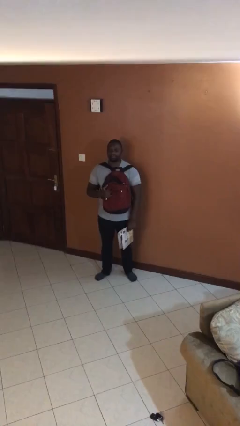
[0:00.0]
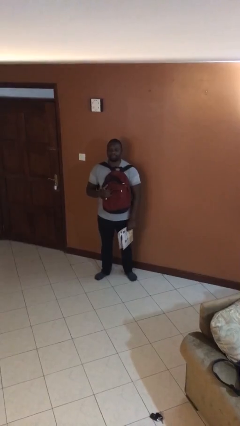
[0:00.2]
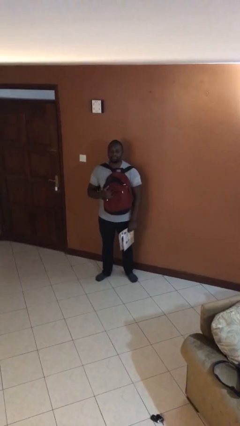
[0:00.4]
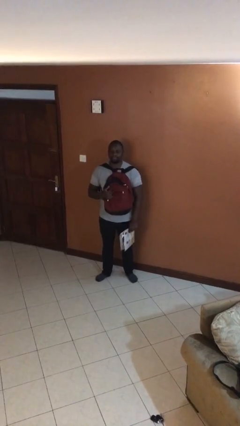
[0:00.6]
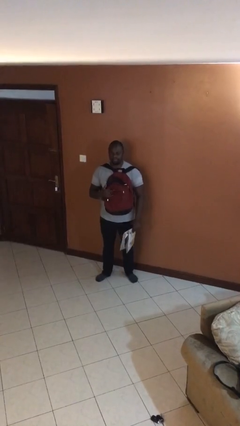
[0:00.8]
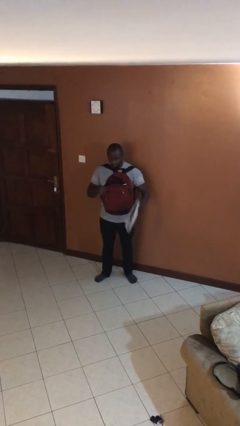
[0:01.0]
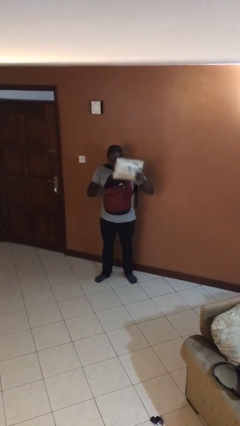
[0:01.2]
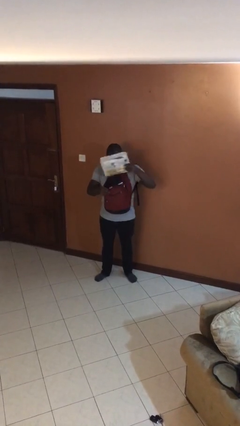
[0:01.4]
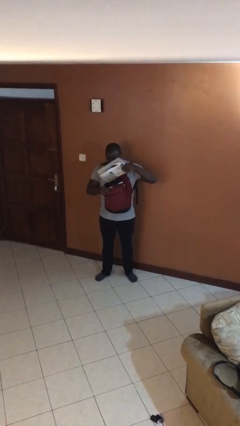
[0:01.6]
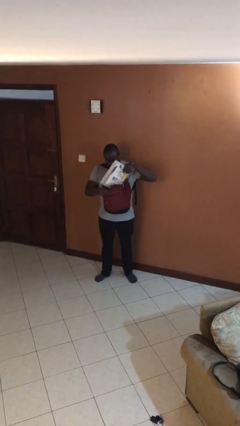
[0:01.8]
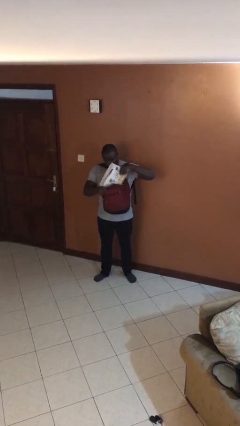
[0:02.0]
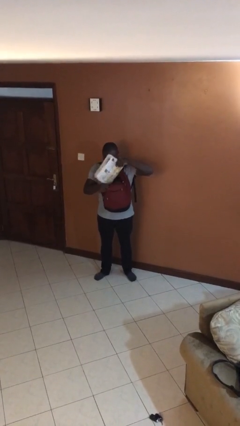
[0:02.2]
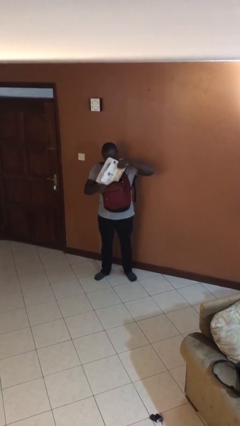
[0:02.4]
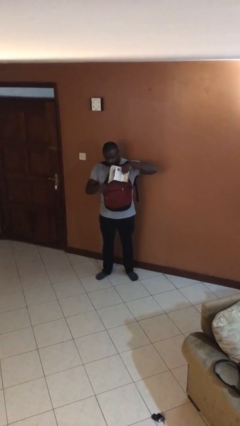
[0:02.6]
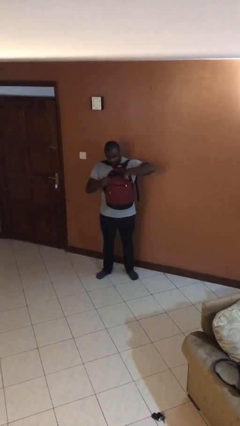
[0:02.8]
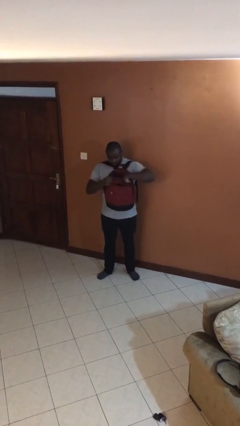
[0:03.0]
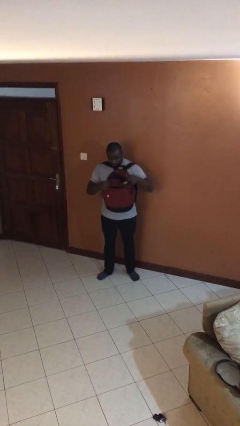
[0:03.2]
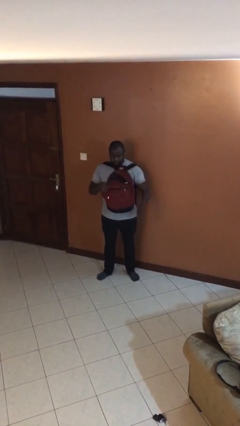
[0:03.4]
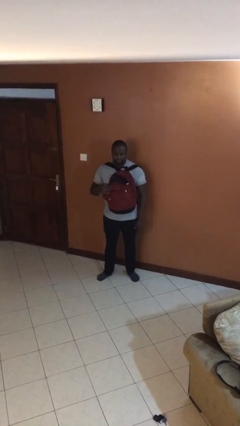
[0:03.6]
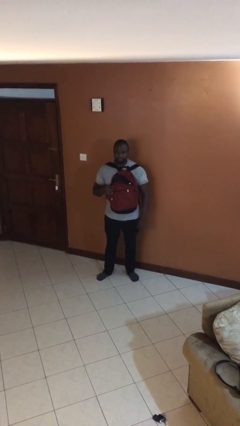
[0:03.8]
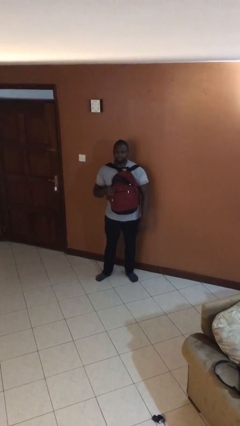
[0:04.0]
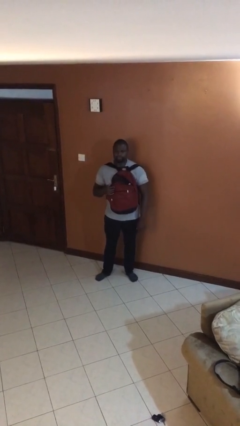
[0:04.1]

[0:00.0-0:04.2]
person puts object into backpack

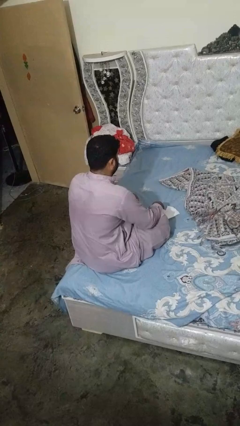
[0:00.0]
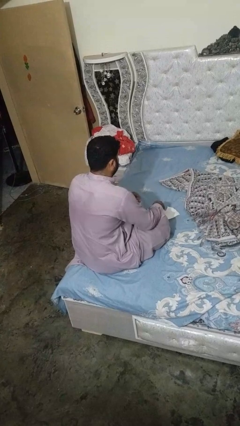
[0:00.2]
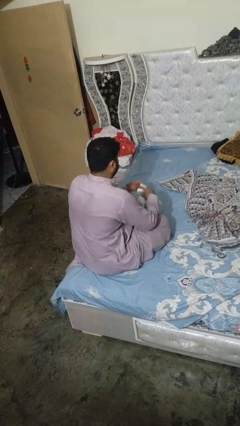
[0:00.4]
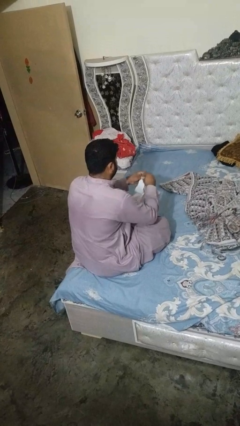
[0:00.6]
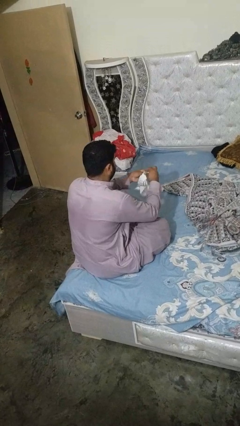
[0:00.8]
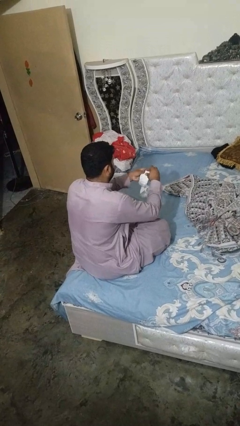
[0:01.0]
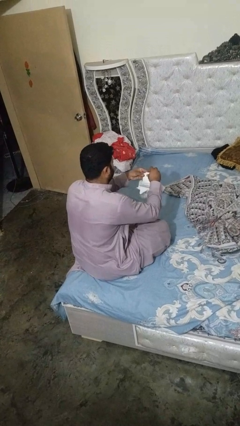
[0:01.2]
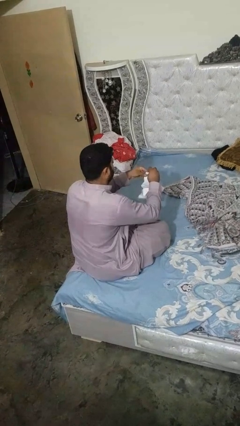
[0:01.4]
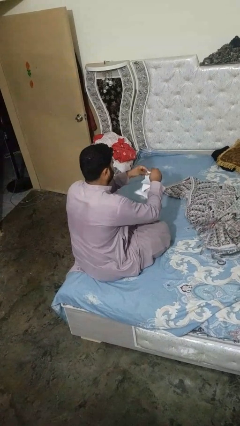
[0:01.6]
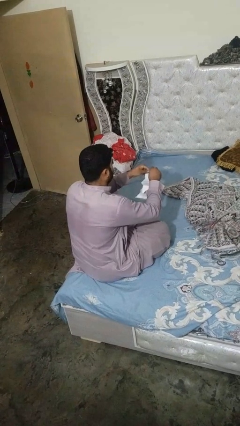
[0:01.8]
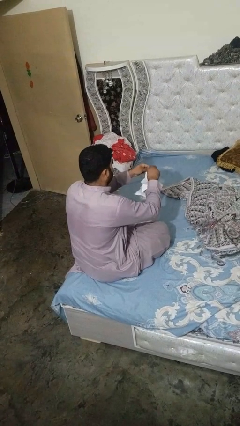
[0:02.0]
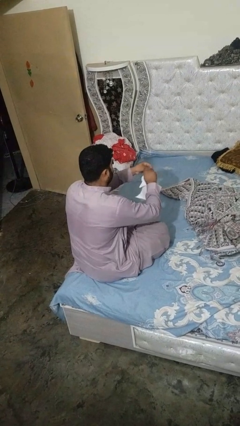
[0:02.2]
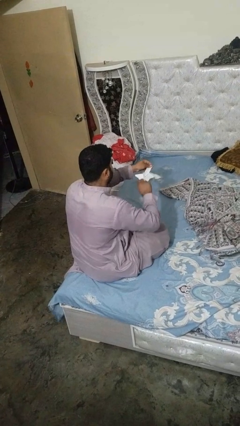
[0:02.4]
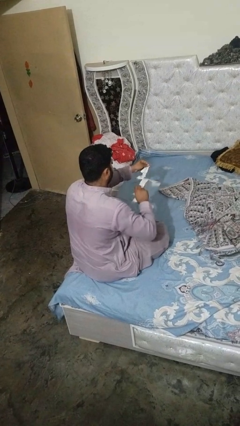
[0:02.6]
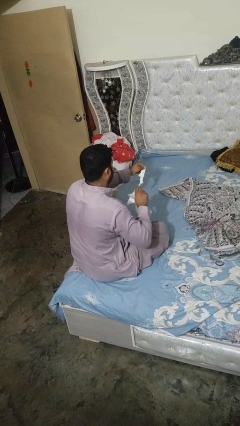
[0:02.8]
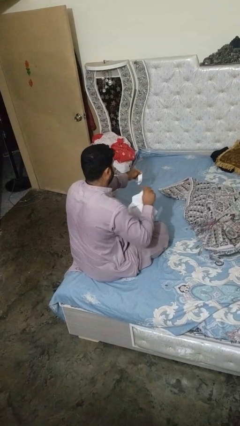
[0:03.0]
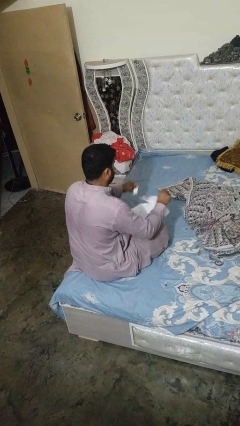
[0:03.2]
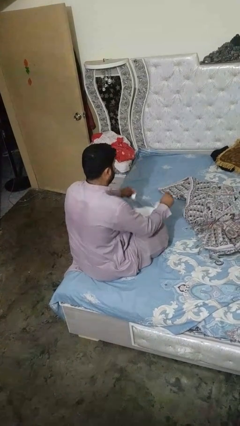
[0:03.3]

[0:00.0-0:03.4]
person tears paper

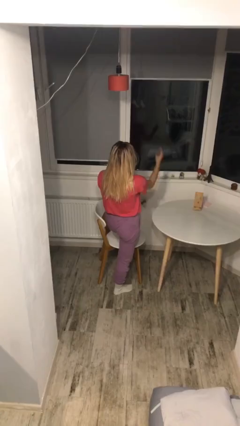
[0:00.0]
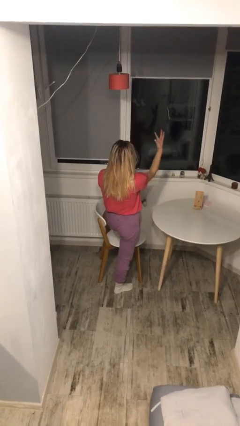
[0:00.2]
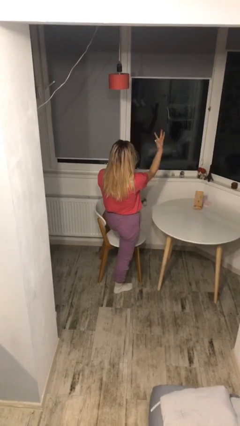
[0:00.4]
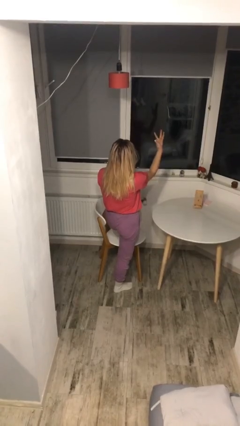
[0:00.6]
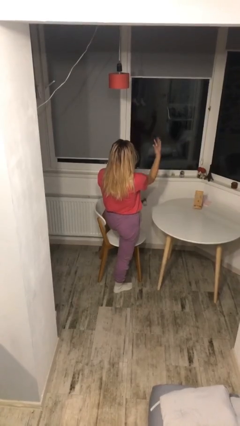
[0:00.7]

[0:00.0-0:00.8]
person gestures number three

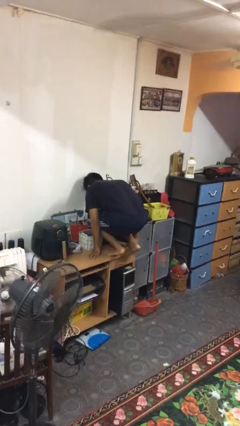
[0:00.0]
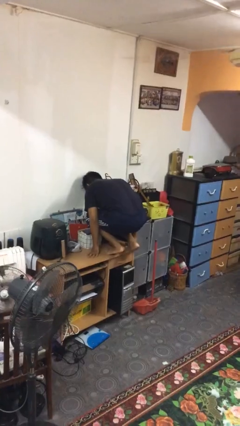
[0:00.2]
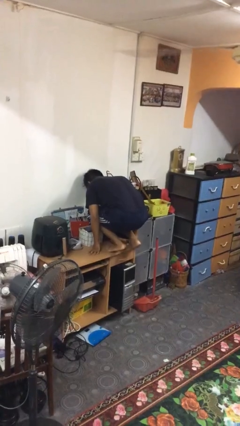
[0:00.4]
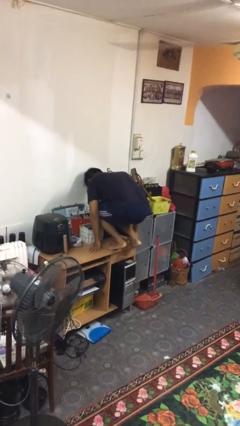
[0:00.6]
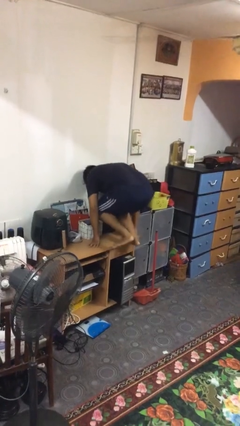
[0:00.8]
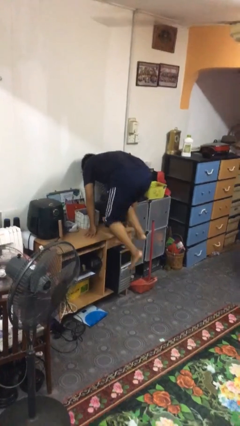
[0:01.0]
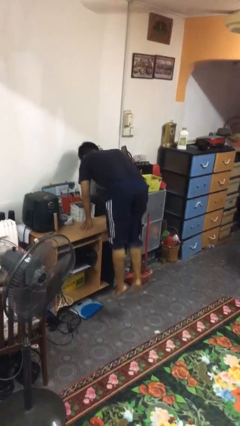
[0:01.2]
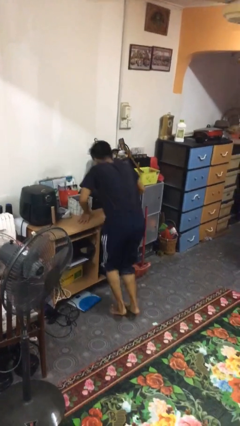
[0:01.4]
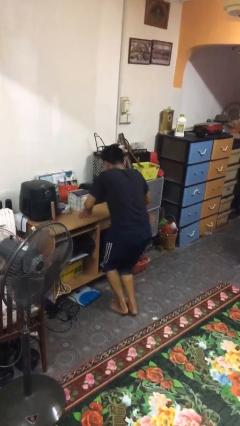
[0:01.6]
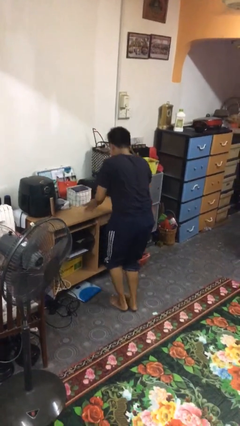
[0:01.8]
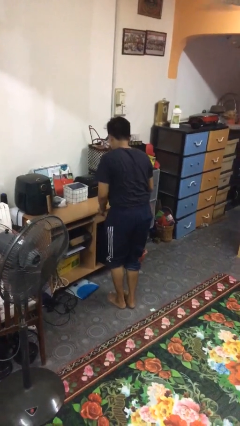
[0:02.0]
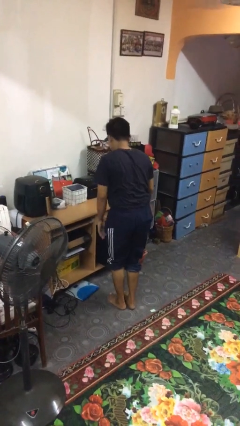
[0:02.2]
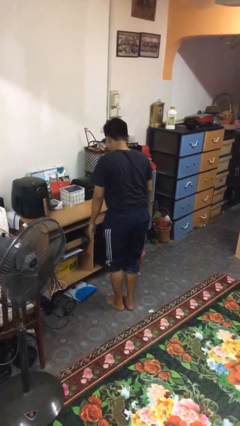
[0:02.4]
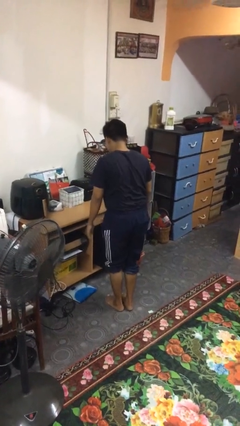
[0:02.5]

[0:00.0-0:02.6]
person climbs off table

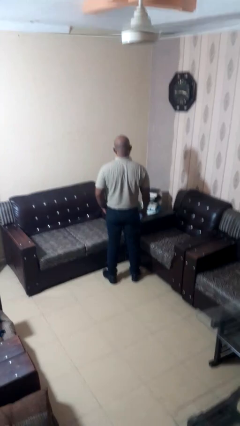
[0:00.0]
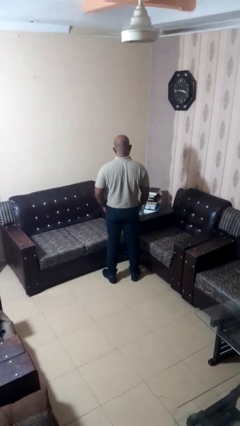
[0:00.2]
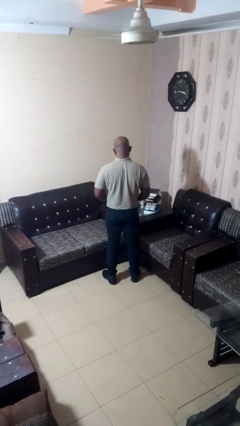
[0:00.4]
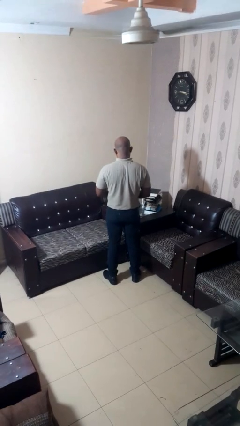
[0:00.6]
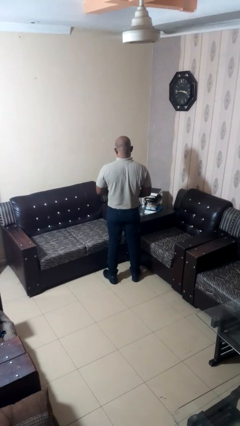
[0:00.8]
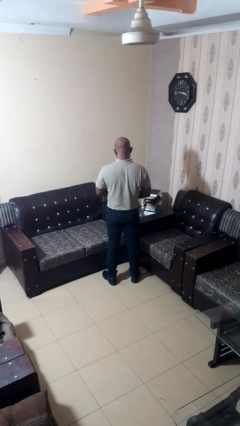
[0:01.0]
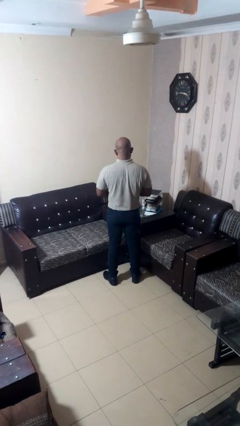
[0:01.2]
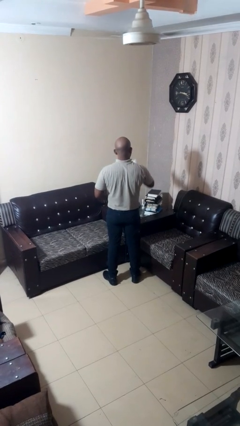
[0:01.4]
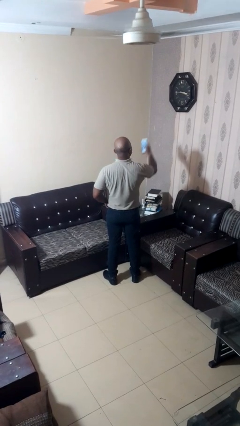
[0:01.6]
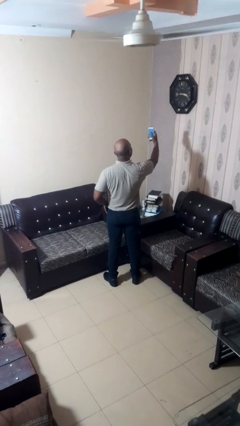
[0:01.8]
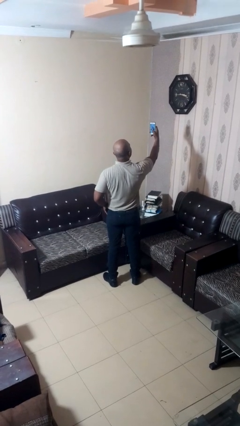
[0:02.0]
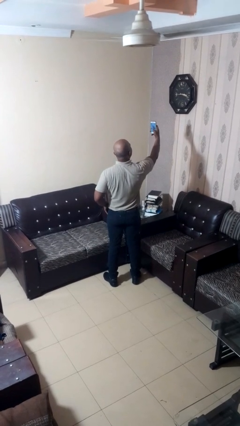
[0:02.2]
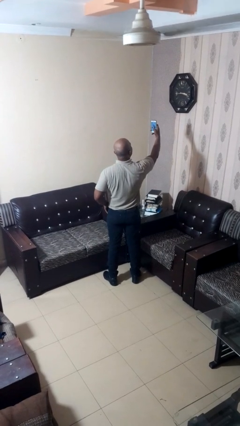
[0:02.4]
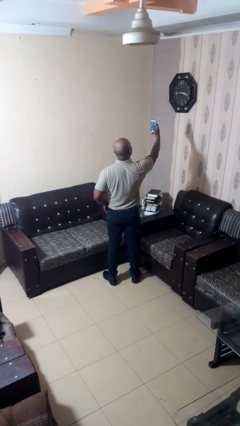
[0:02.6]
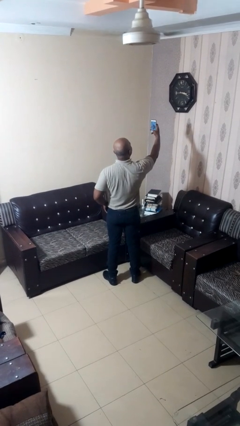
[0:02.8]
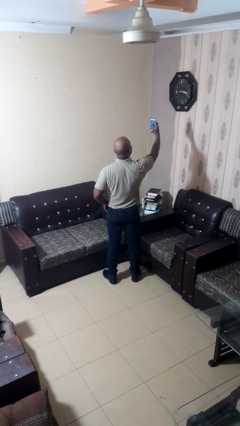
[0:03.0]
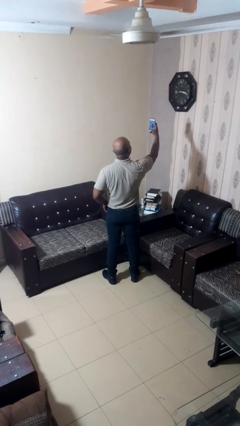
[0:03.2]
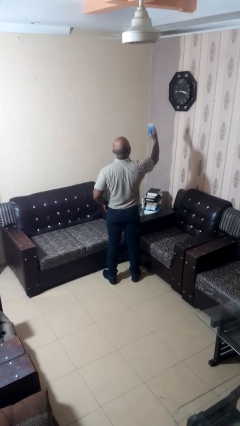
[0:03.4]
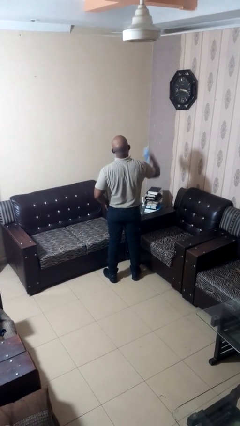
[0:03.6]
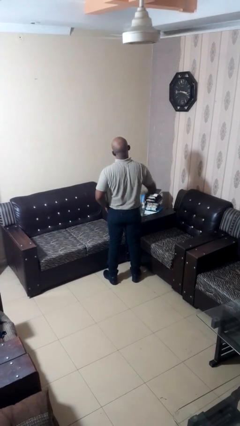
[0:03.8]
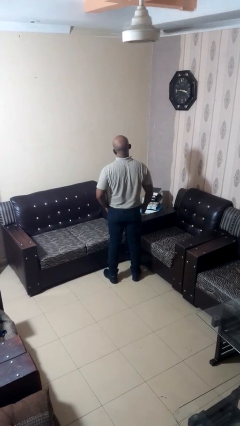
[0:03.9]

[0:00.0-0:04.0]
person takes selfie

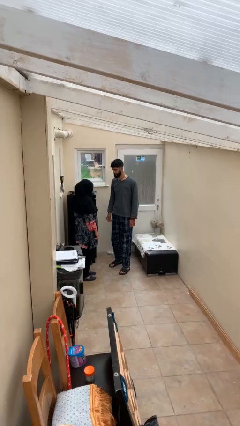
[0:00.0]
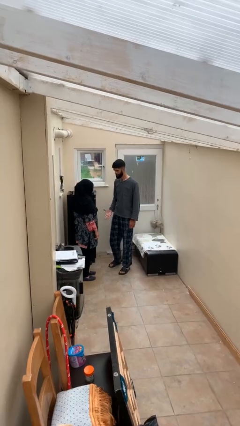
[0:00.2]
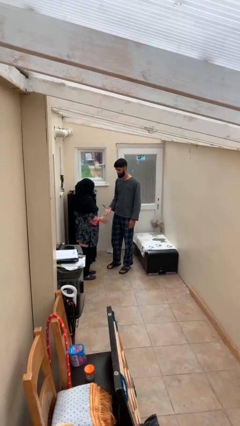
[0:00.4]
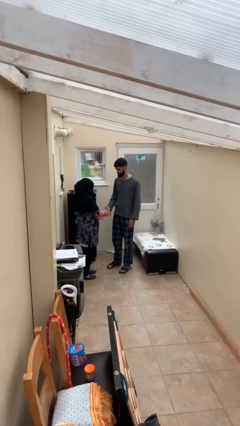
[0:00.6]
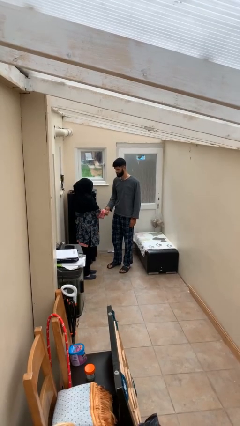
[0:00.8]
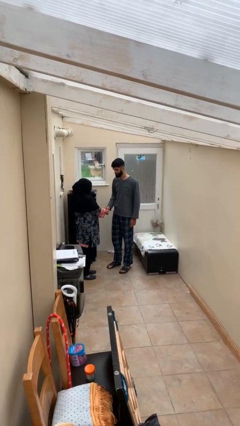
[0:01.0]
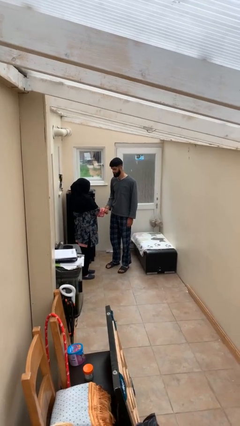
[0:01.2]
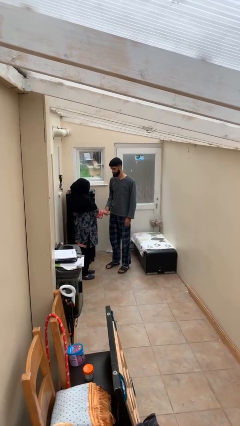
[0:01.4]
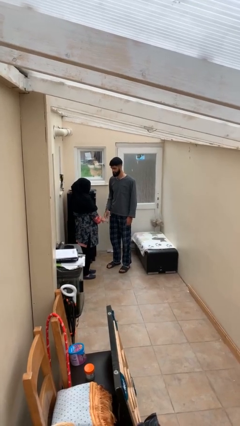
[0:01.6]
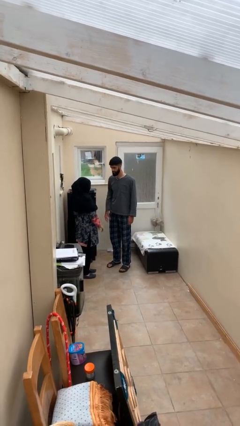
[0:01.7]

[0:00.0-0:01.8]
person shakes hand

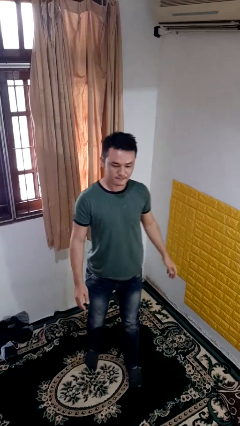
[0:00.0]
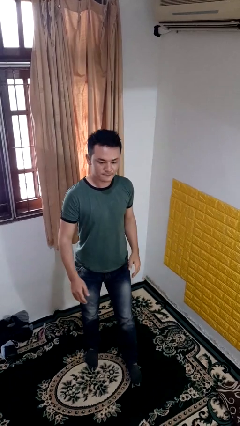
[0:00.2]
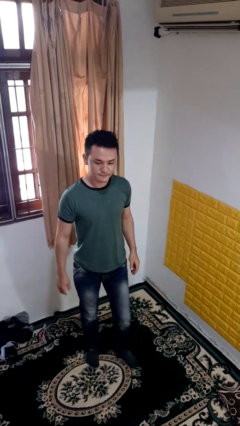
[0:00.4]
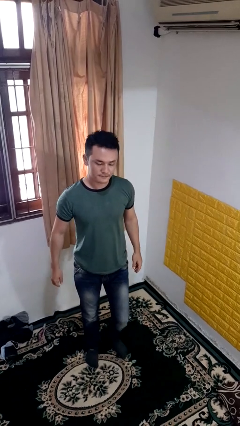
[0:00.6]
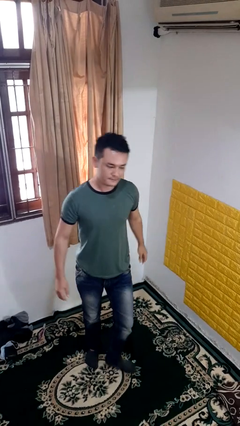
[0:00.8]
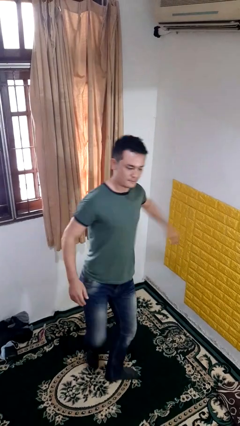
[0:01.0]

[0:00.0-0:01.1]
person karate kicks
